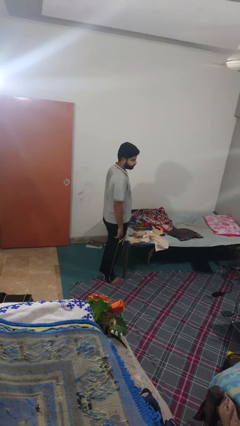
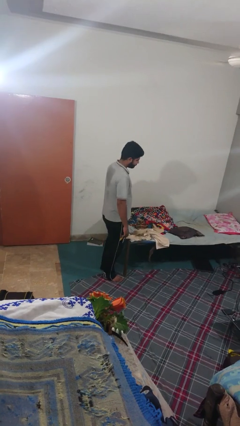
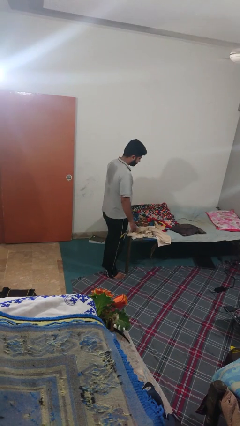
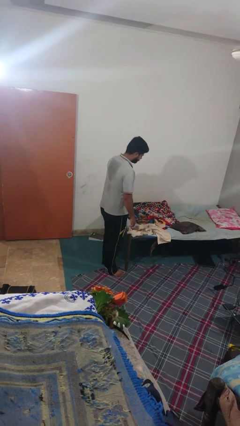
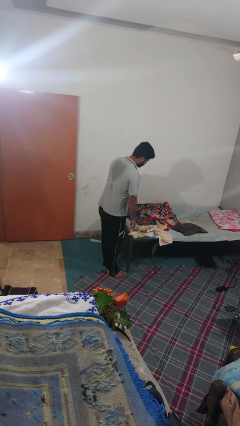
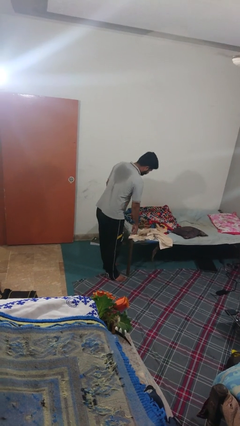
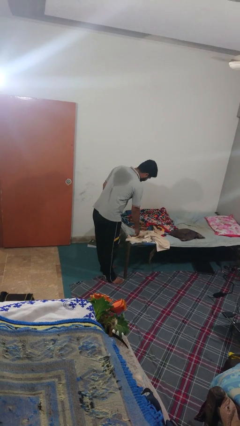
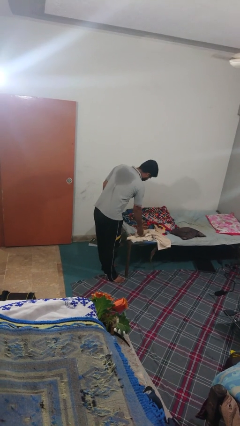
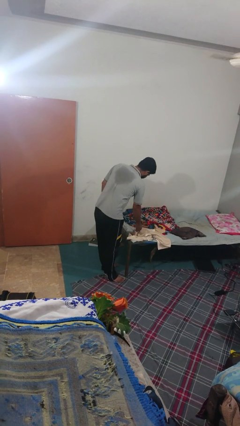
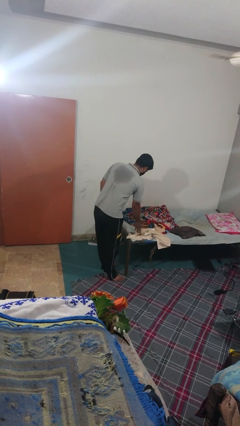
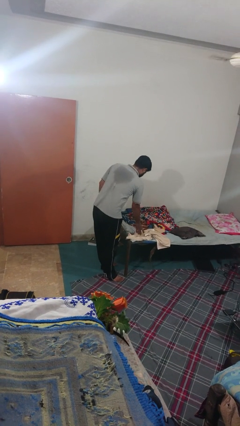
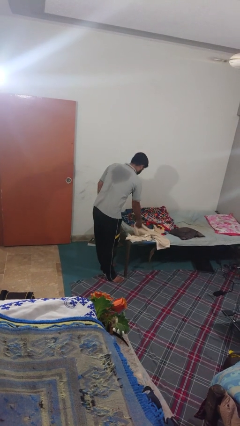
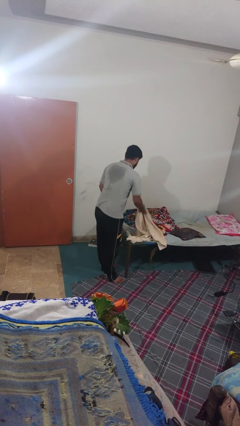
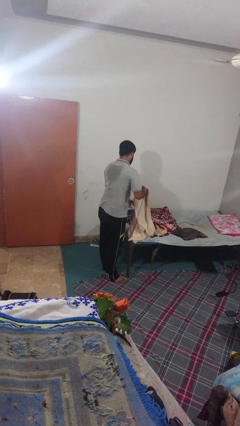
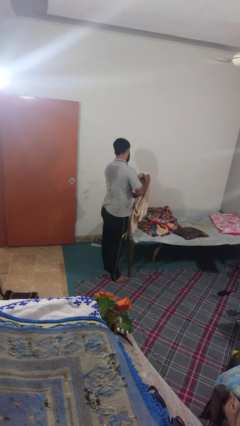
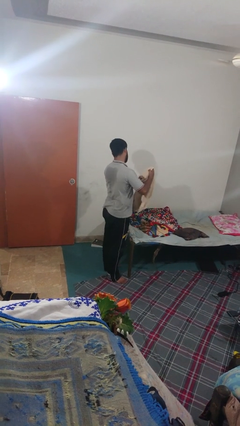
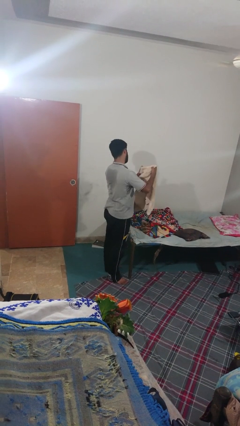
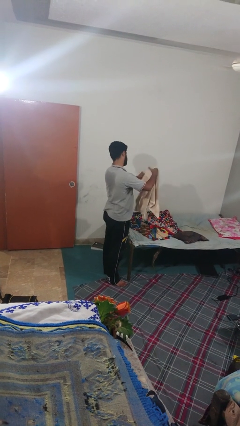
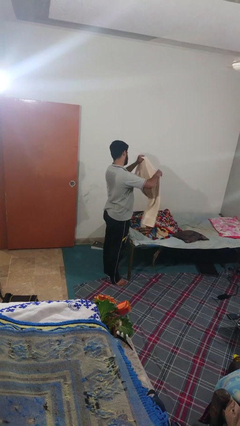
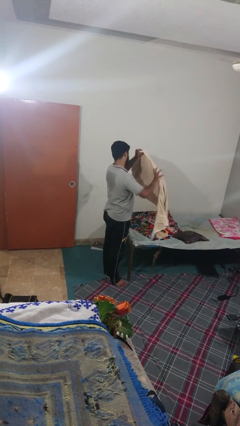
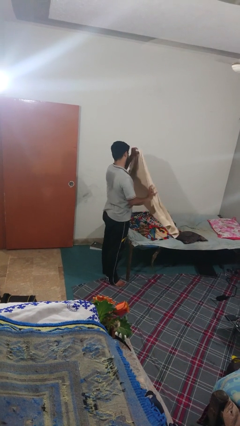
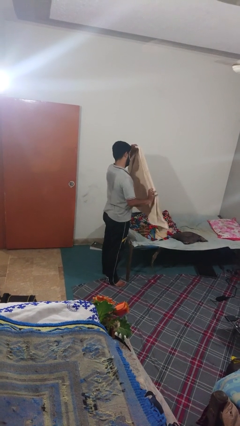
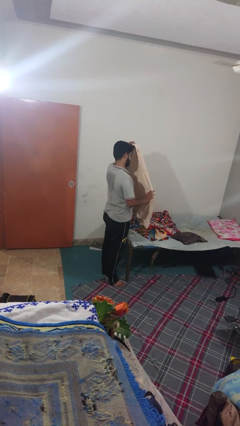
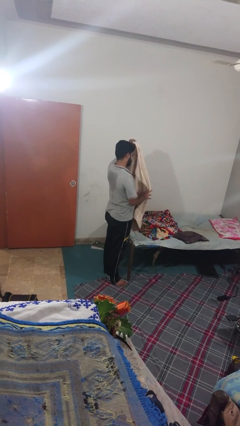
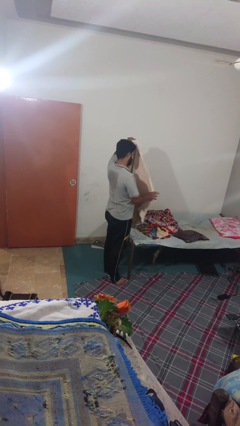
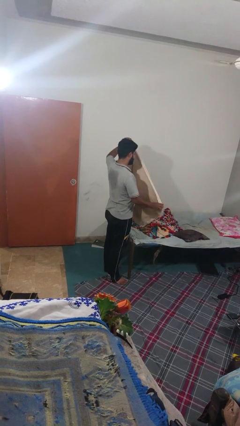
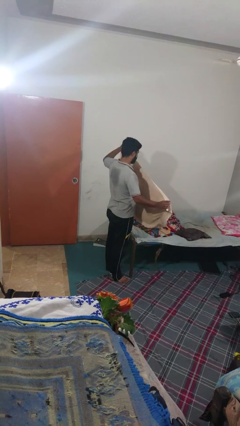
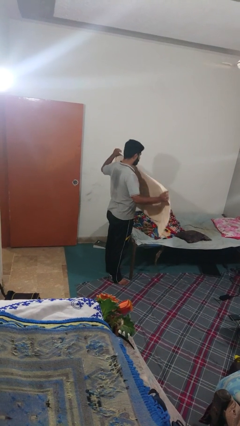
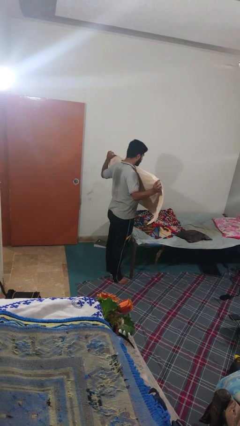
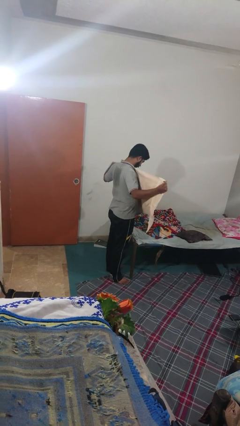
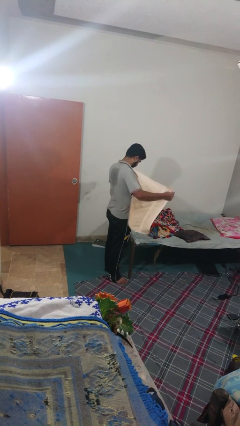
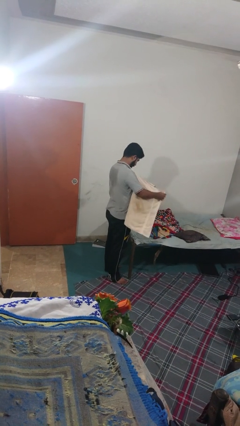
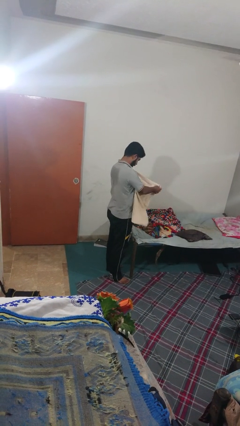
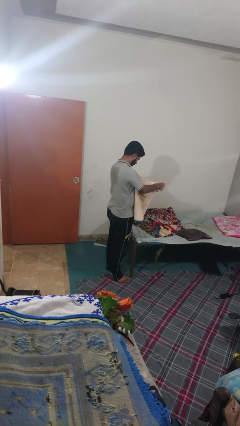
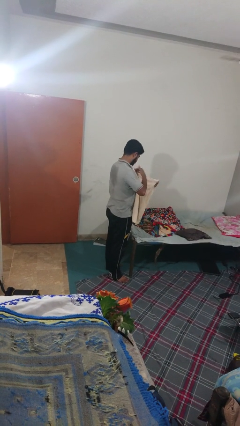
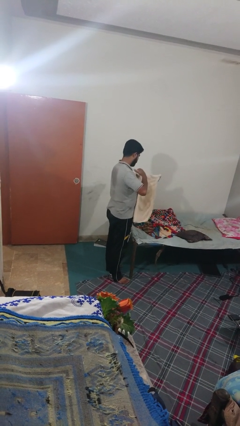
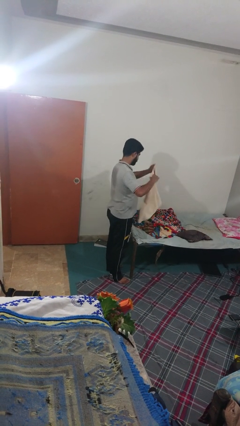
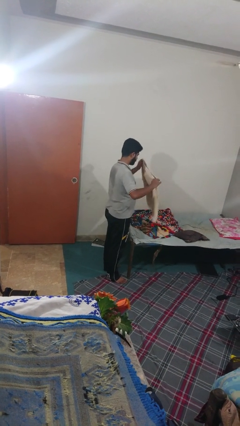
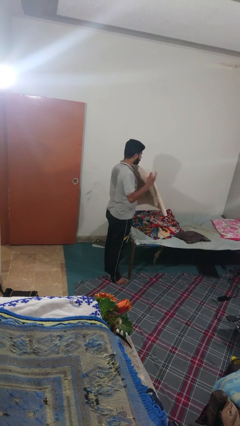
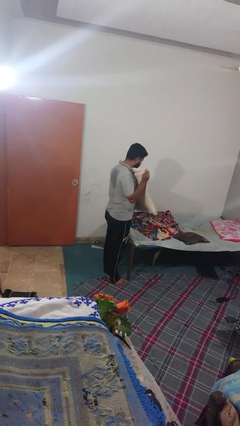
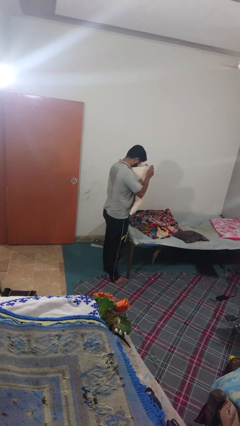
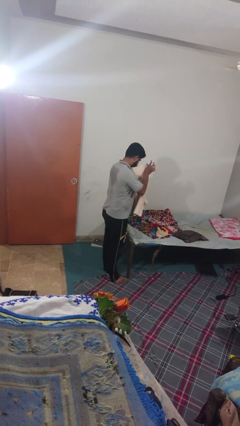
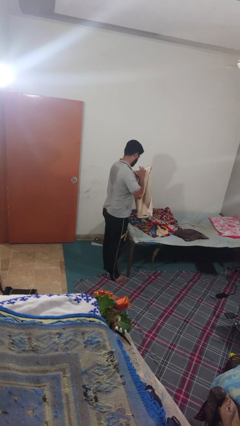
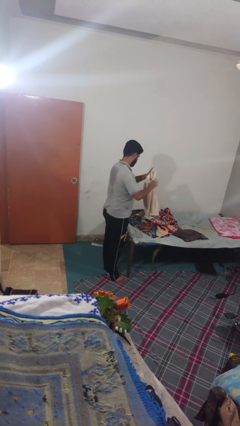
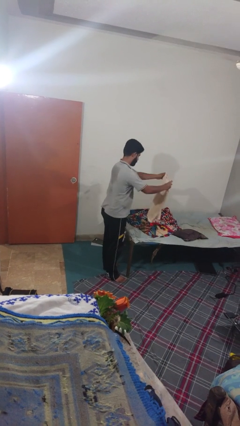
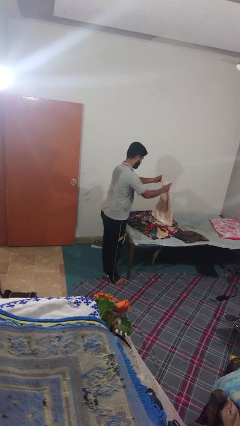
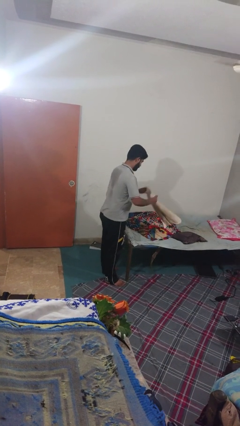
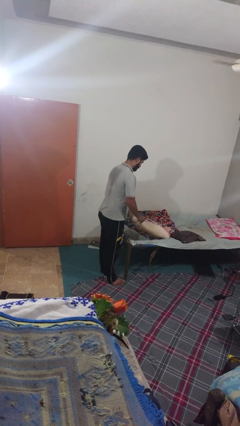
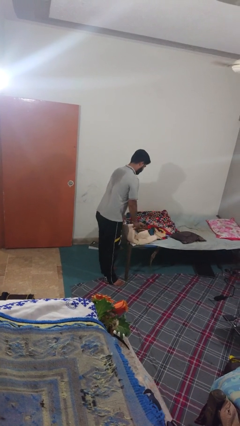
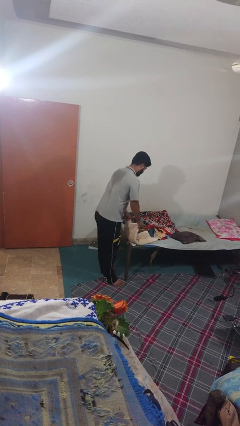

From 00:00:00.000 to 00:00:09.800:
person folds towel

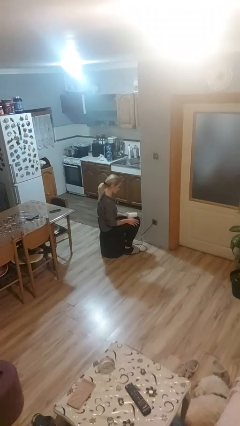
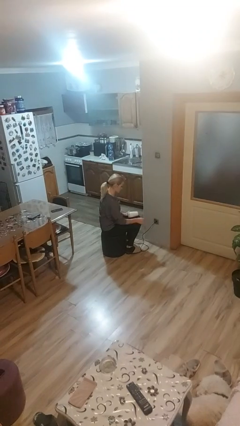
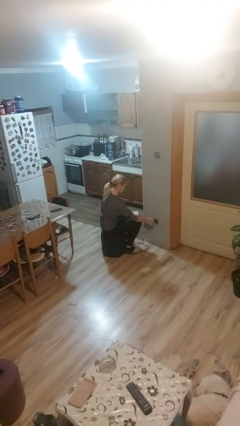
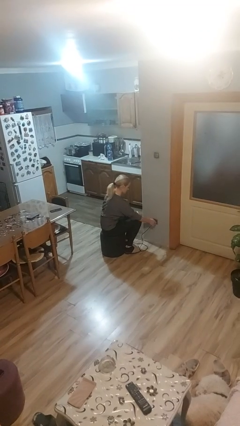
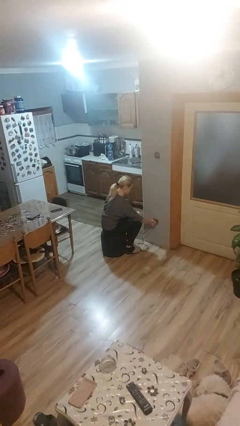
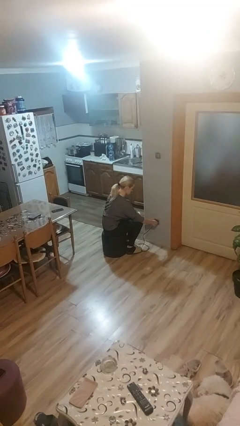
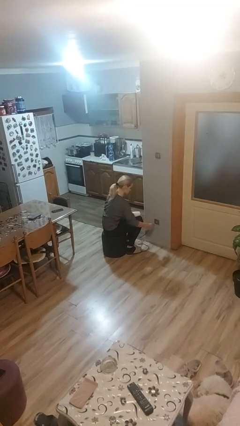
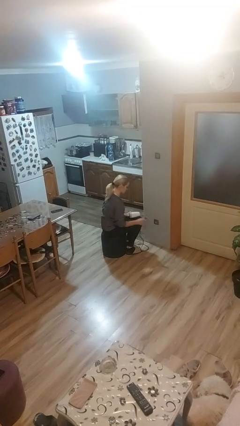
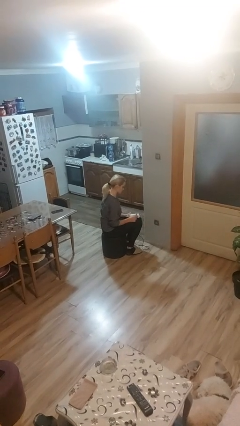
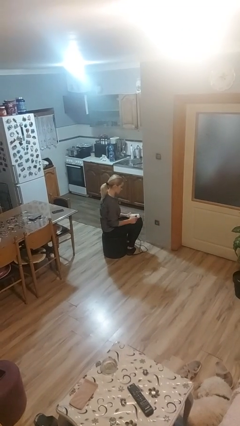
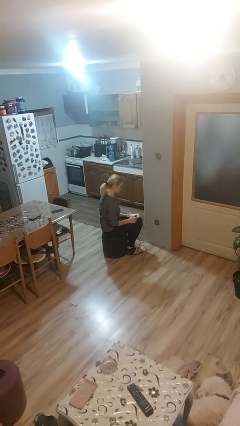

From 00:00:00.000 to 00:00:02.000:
person unplugs from electrical socket

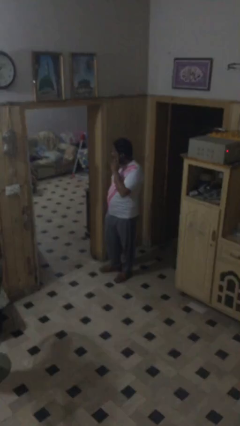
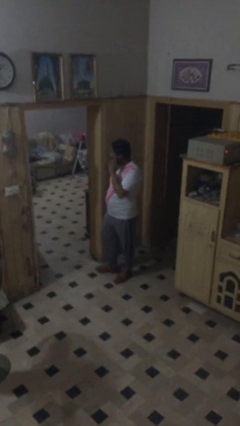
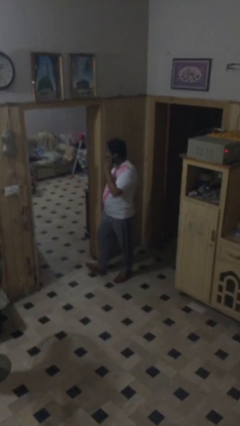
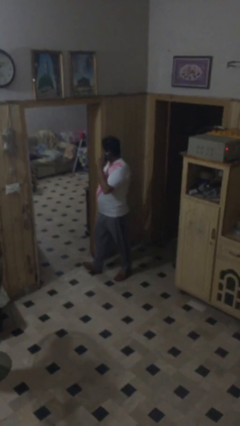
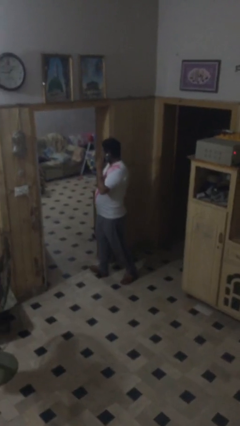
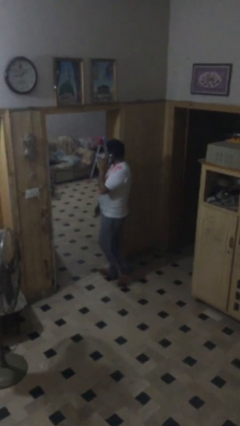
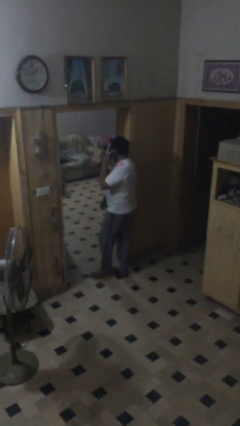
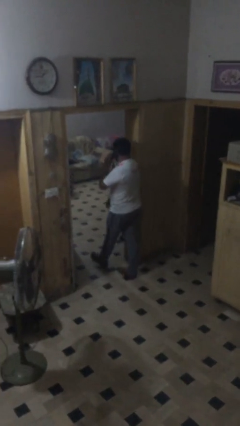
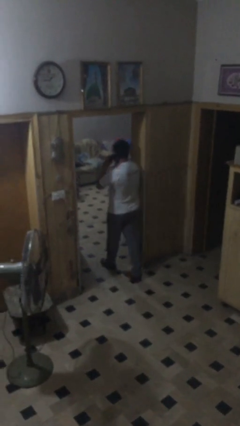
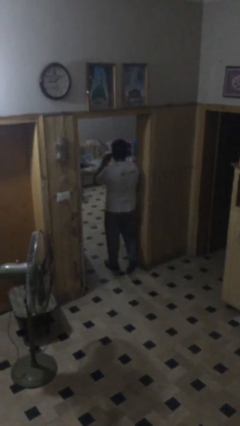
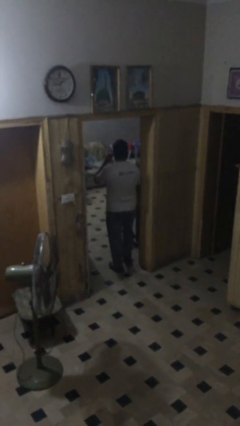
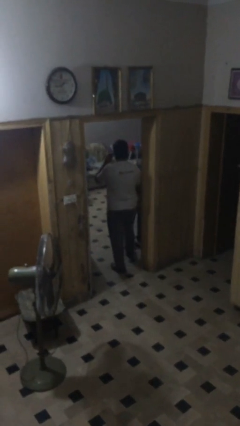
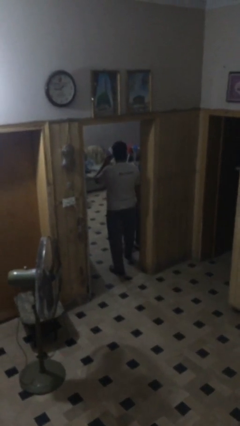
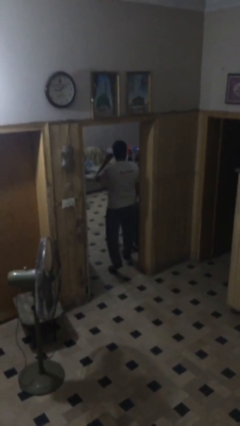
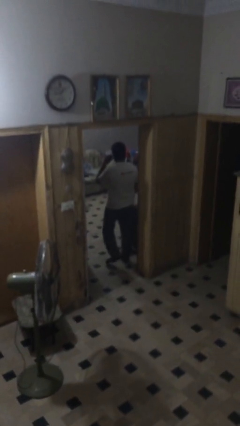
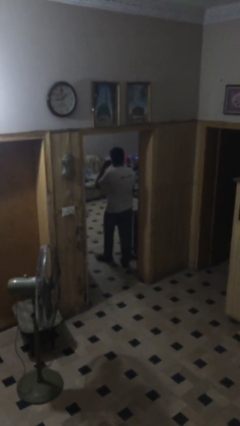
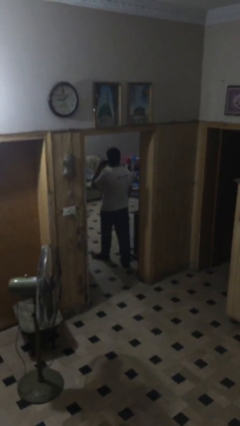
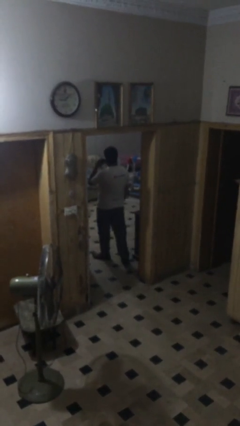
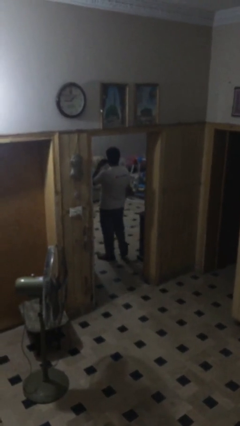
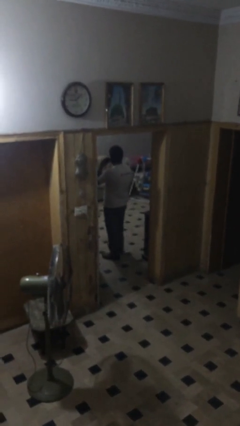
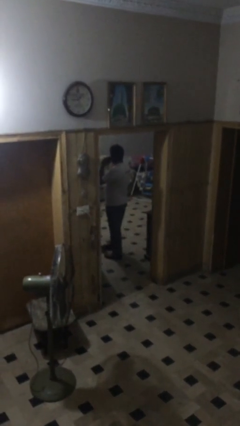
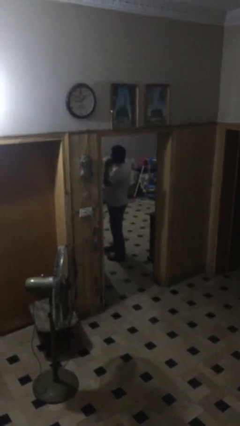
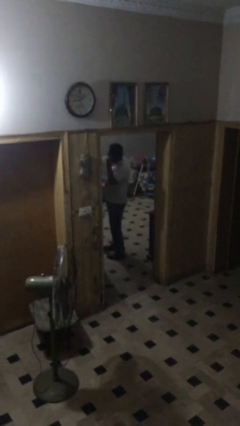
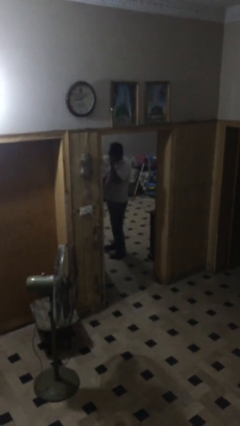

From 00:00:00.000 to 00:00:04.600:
person exits scene through structure

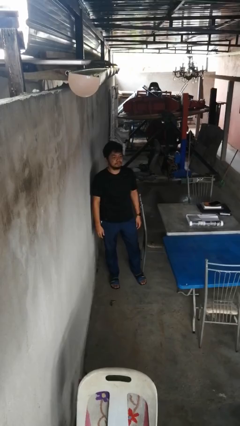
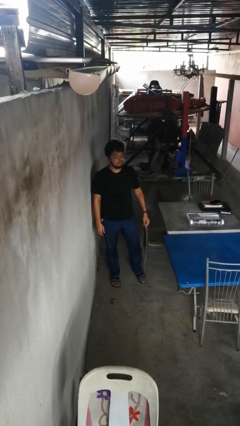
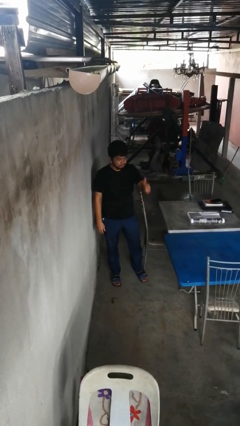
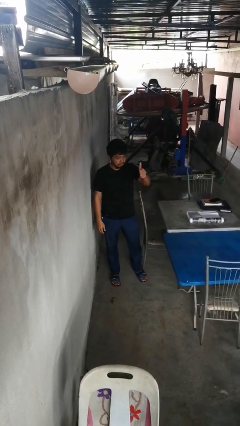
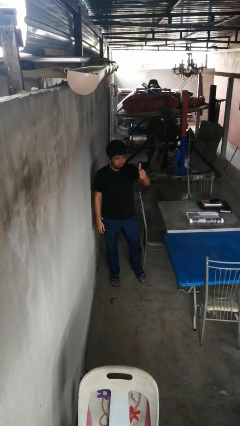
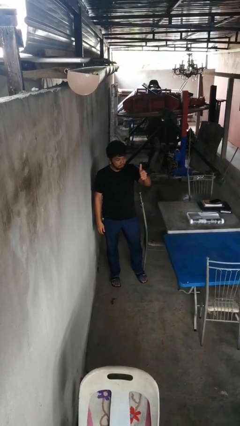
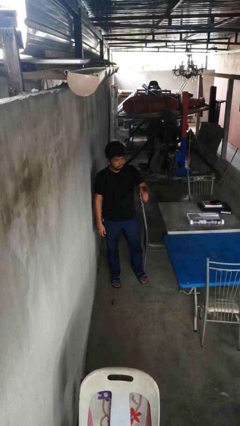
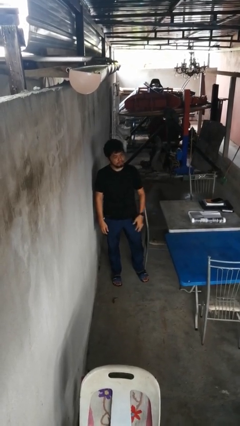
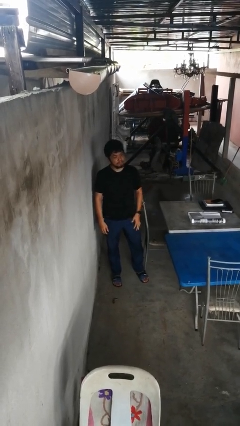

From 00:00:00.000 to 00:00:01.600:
person gestures thumbs up
